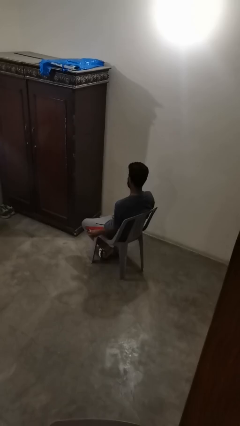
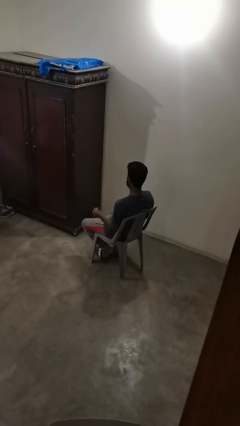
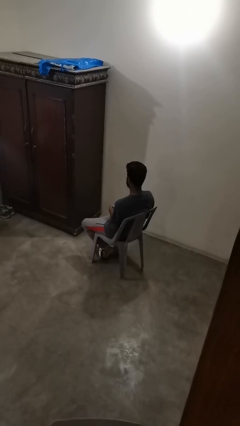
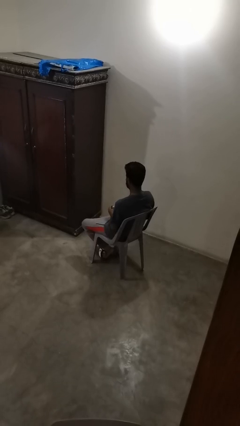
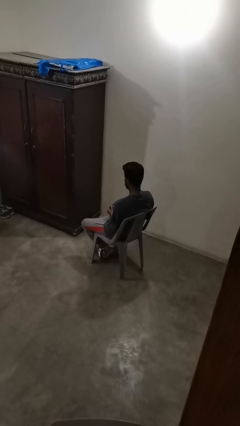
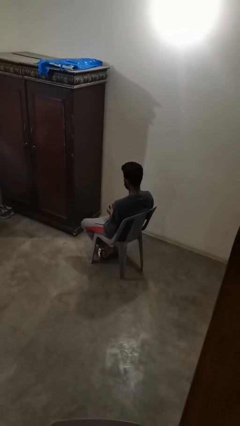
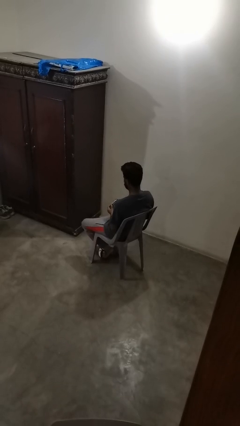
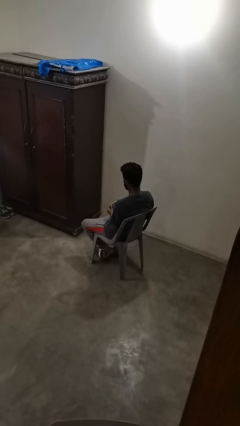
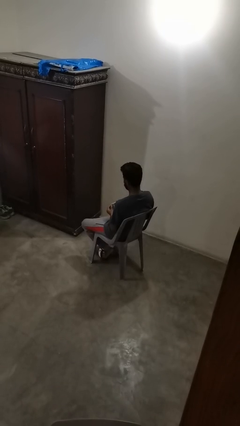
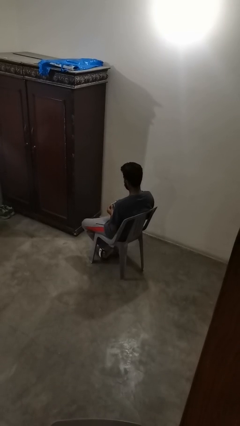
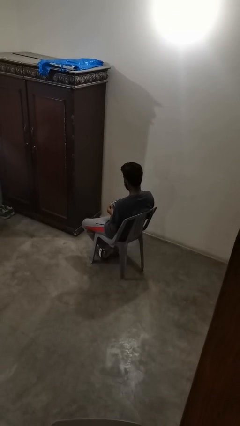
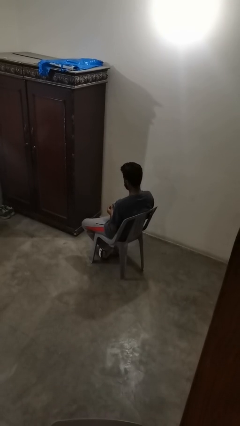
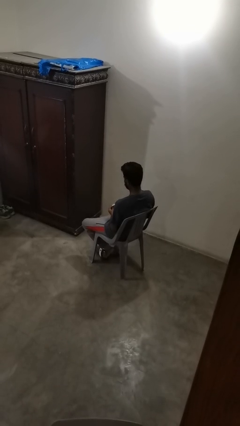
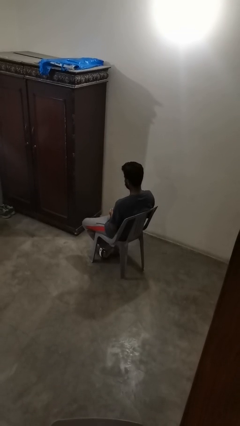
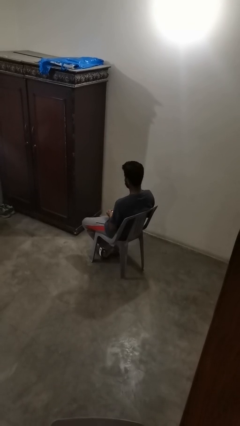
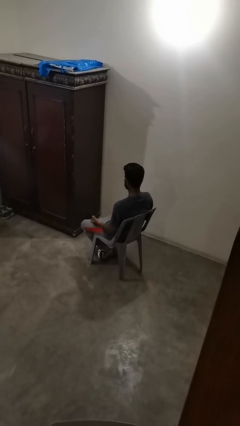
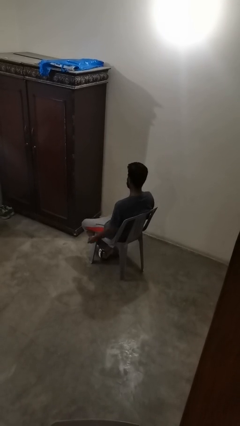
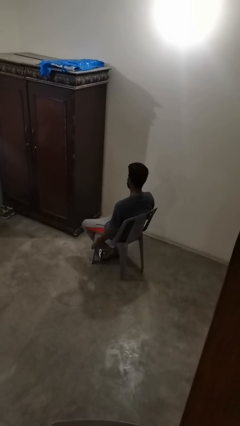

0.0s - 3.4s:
person clips fingernails

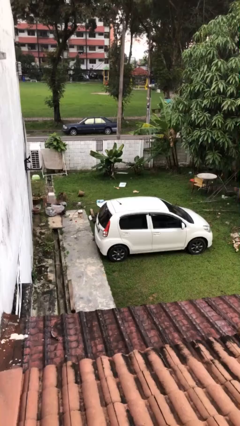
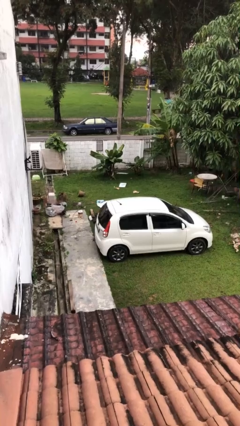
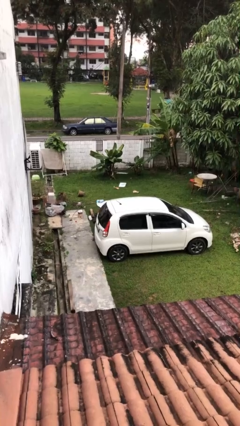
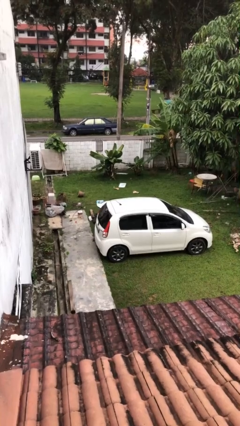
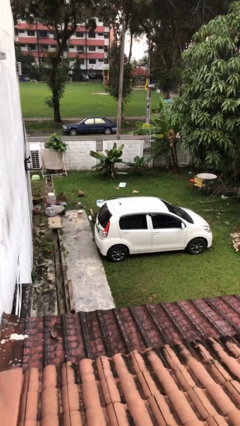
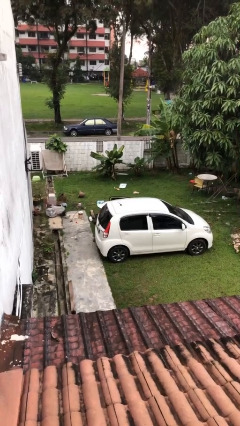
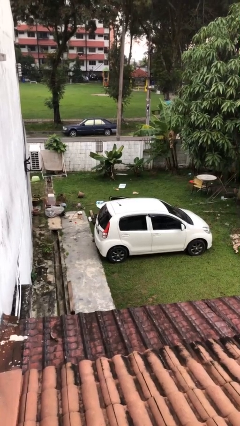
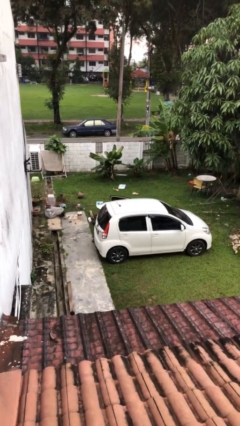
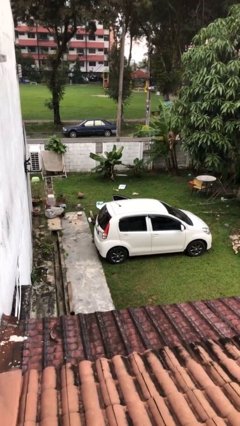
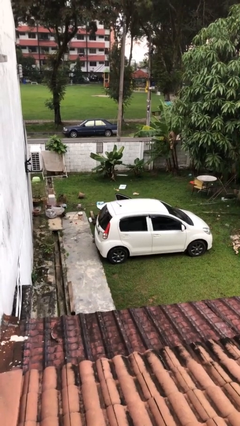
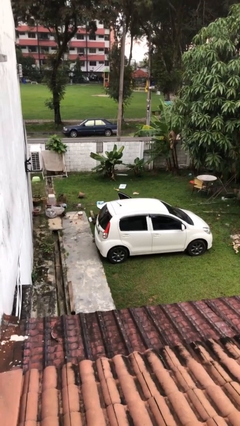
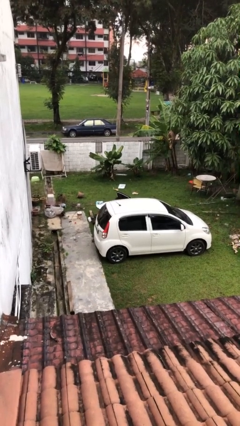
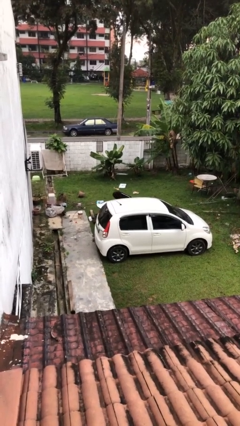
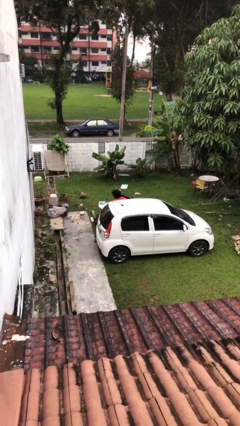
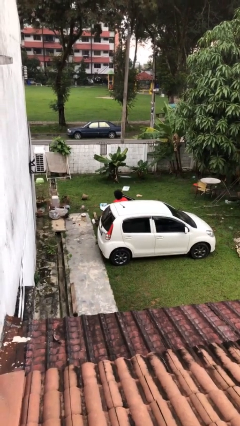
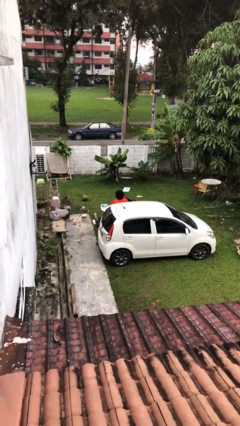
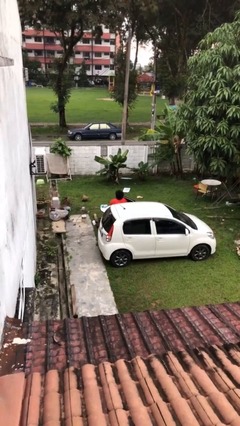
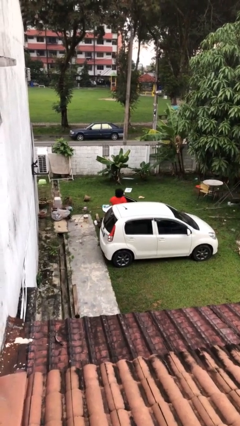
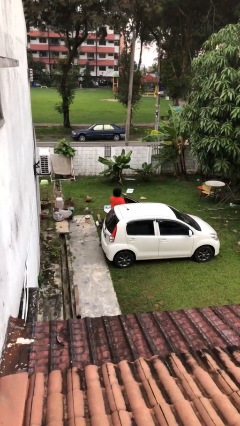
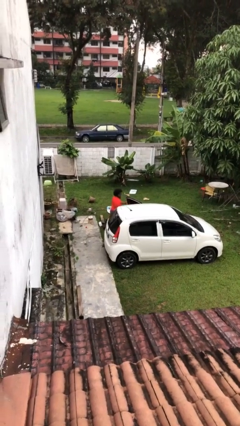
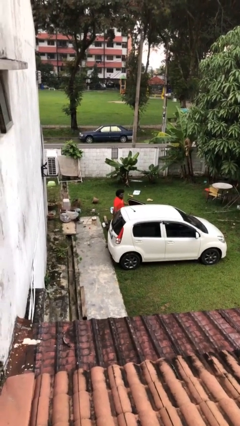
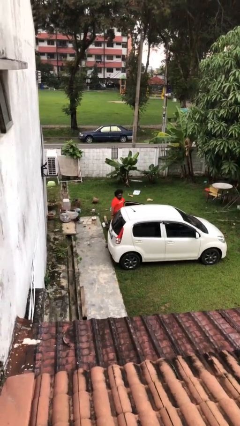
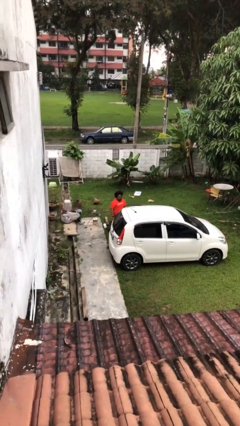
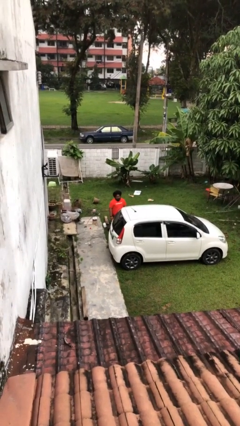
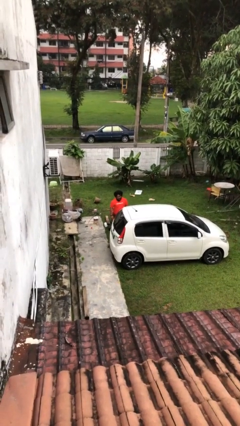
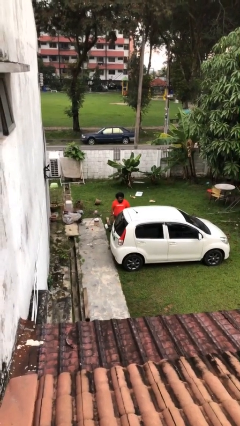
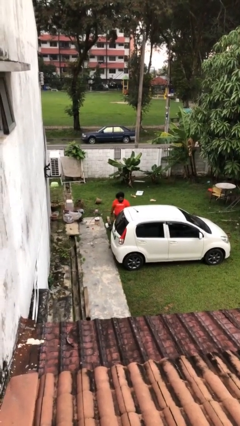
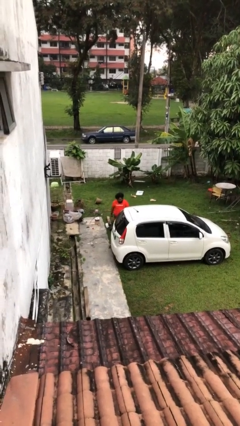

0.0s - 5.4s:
car drops off person

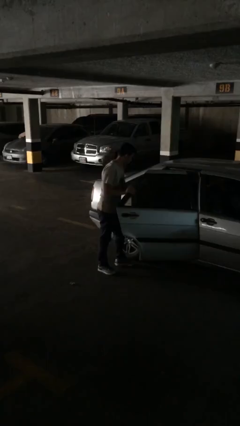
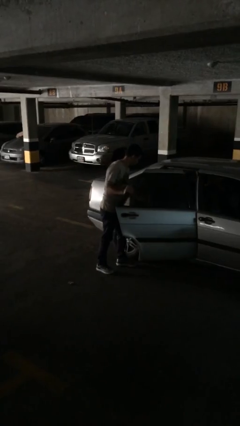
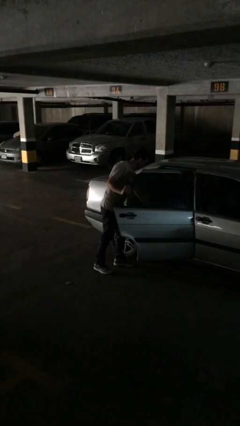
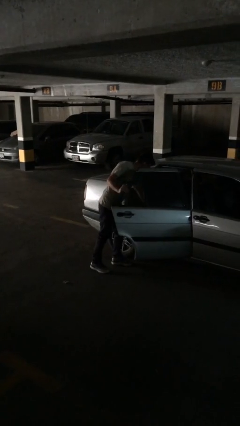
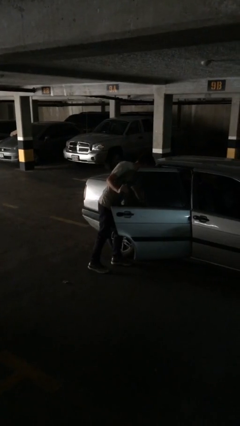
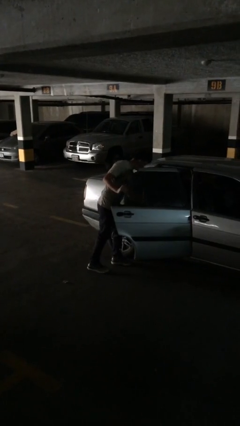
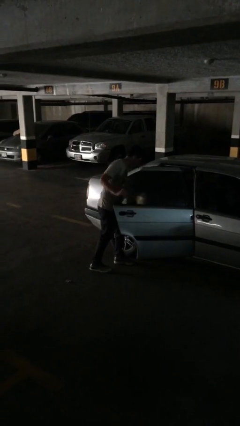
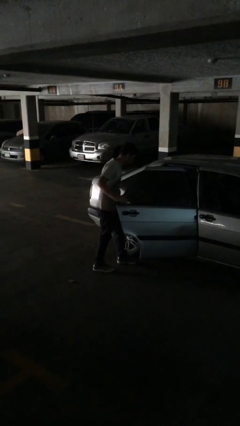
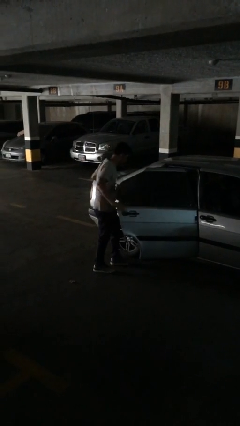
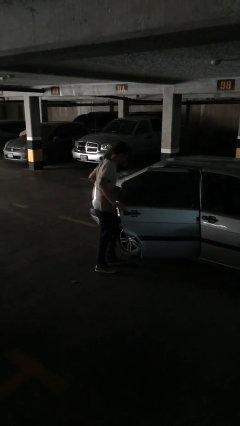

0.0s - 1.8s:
person unloads car

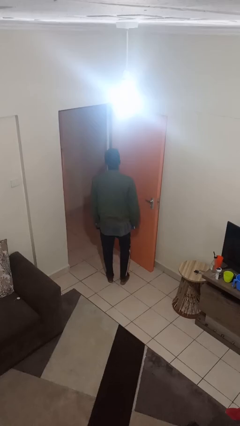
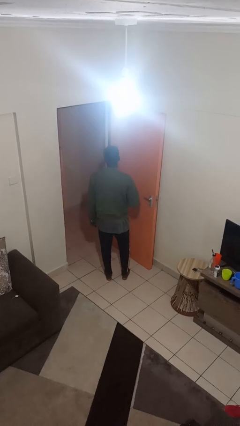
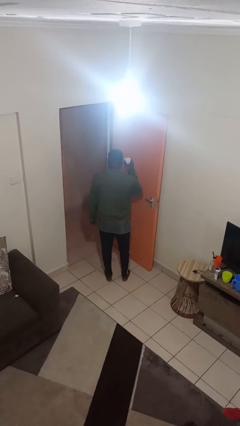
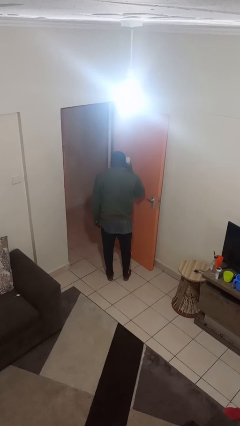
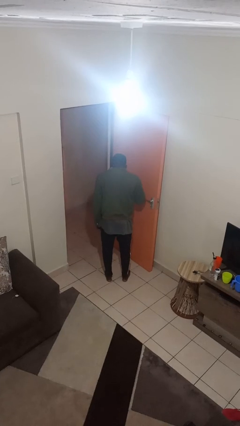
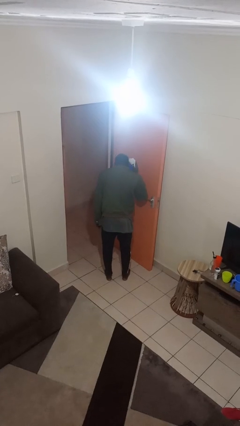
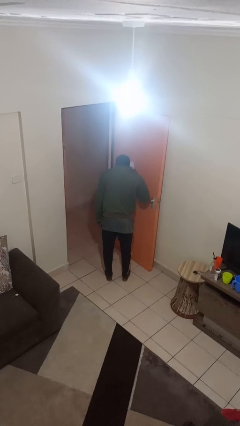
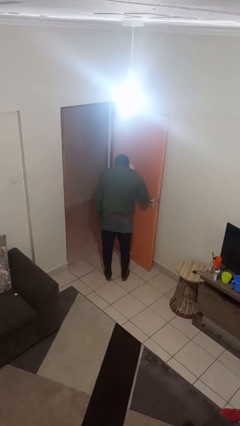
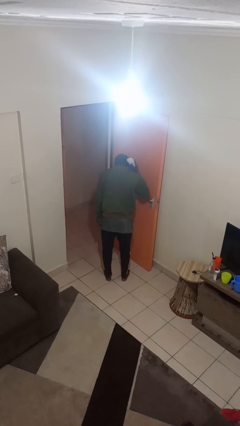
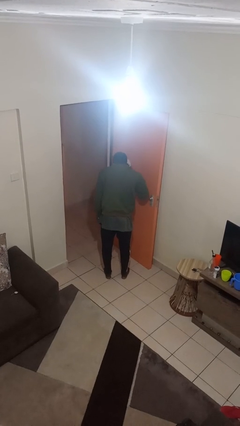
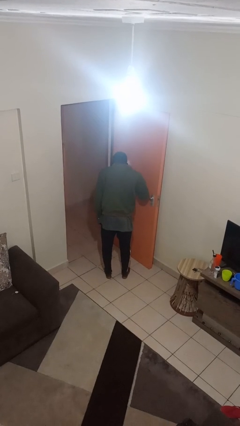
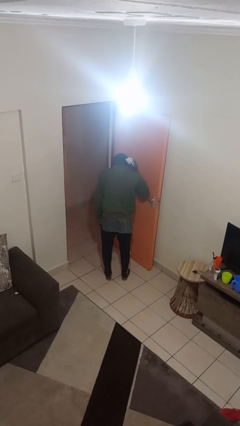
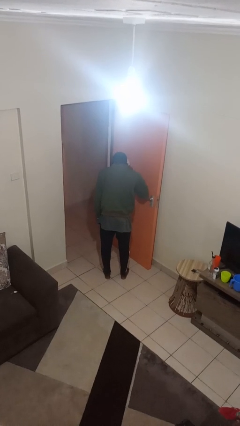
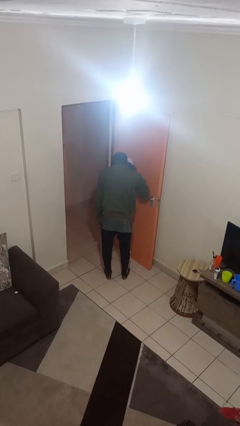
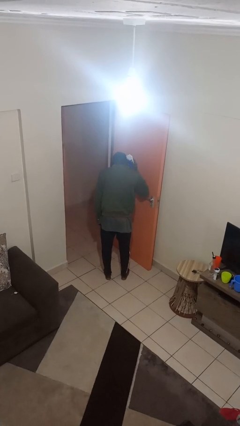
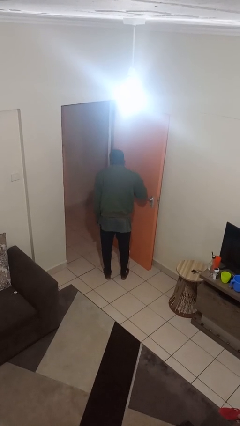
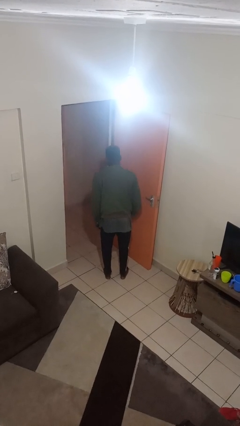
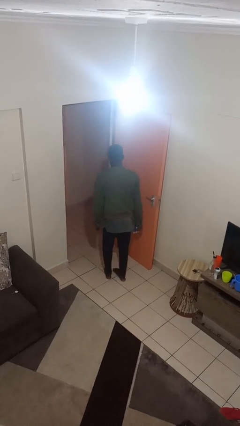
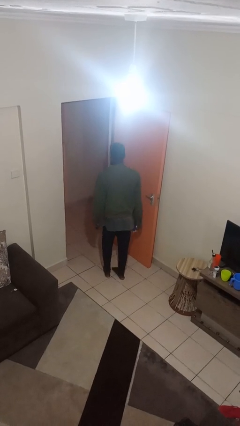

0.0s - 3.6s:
person brushes hair

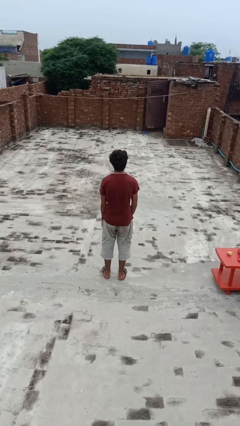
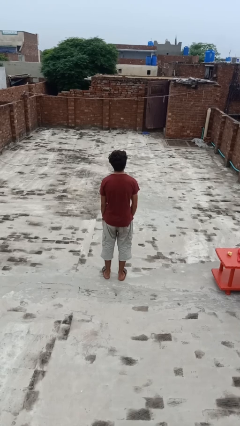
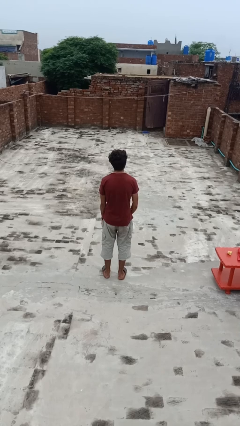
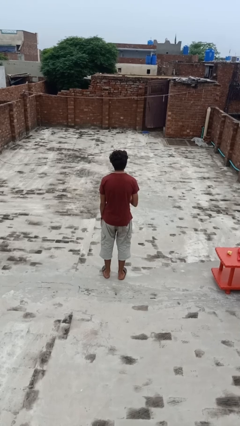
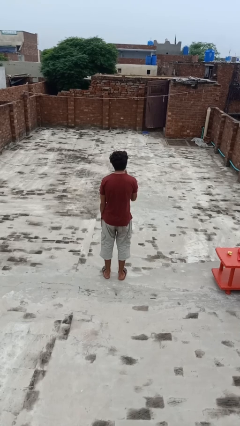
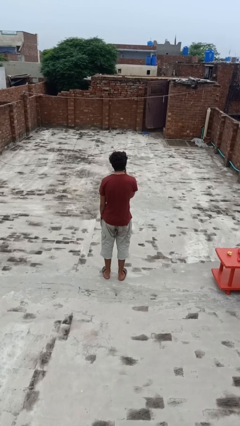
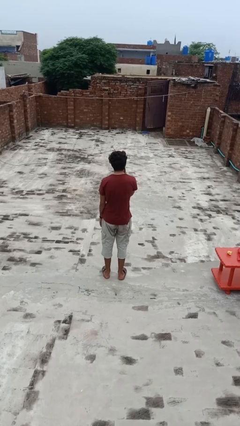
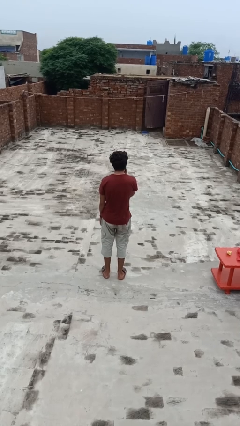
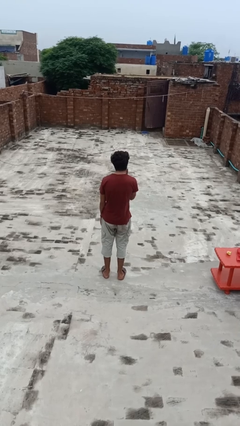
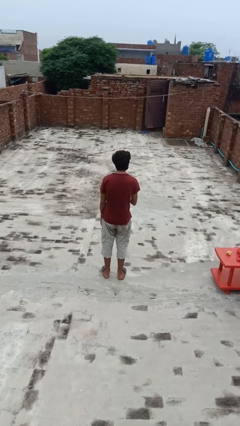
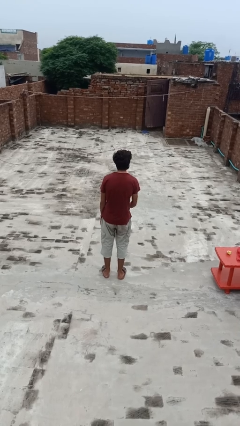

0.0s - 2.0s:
person gestures blow kiss

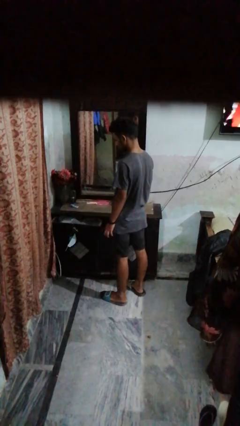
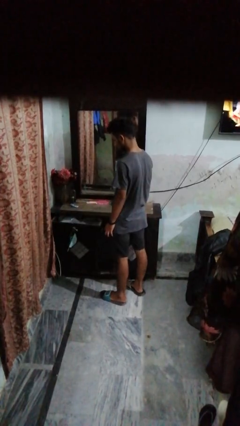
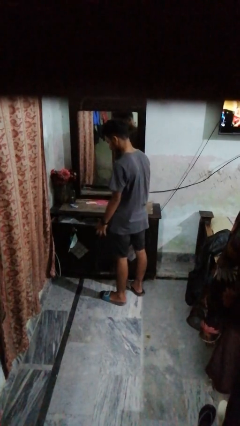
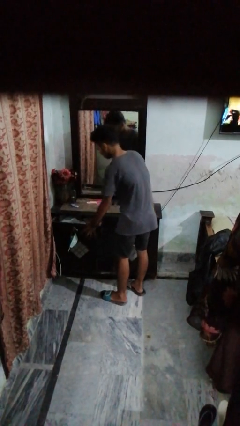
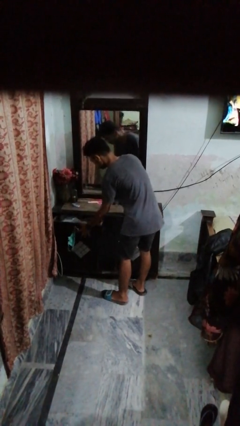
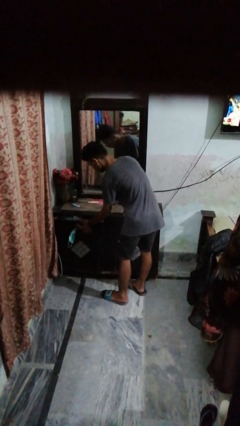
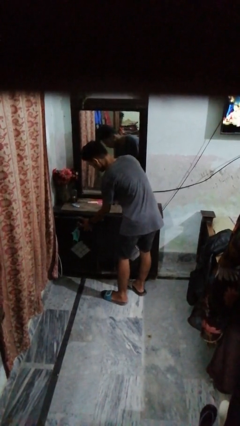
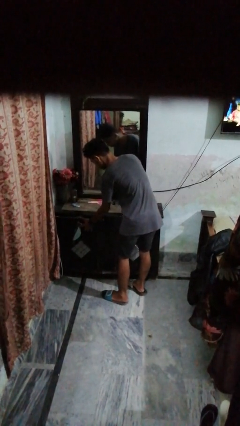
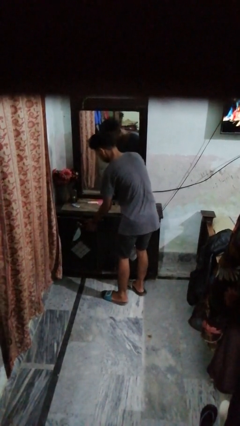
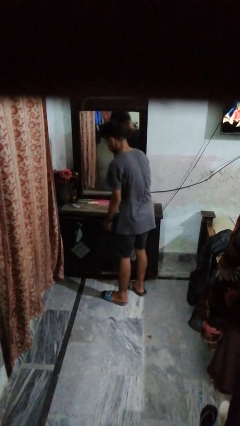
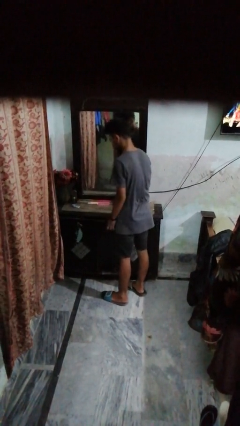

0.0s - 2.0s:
person closes dresser drawer
